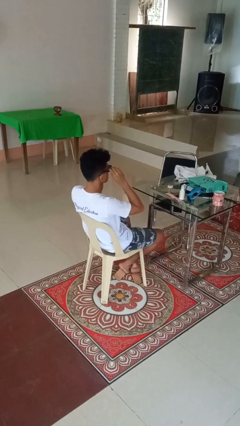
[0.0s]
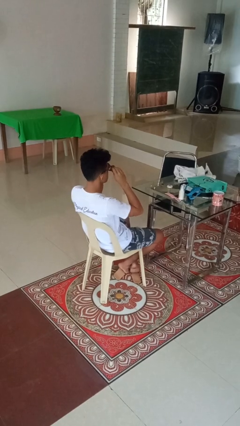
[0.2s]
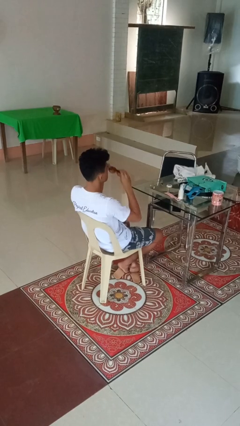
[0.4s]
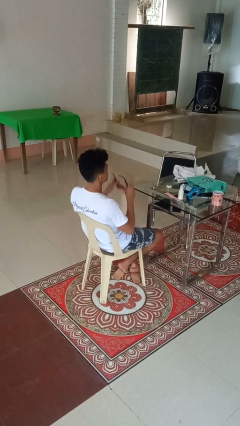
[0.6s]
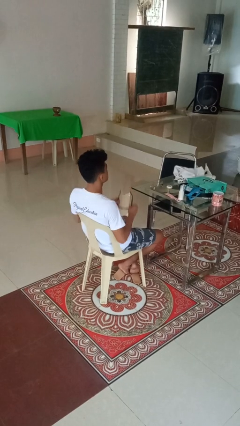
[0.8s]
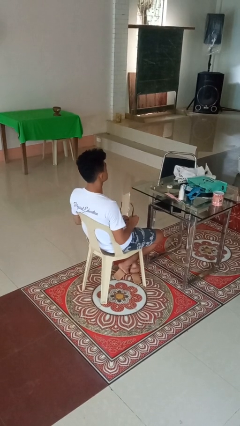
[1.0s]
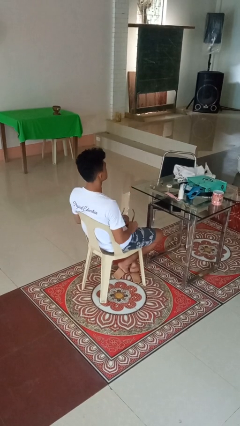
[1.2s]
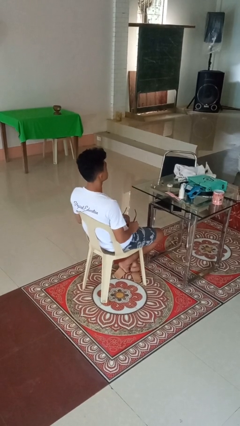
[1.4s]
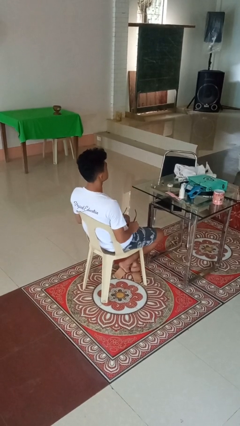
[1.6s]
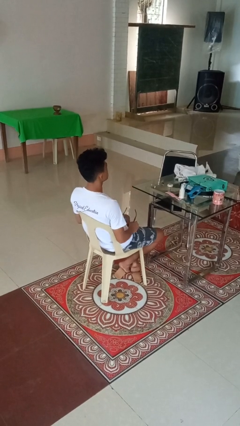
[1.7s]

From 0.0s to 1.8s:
person takes off sunglasses

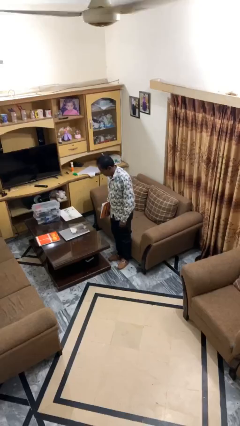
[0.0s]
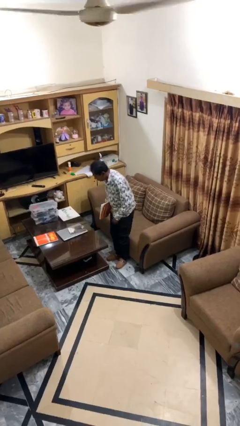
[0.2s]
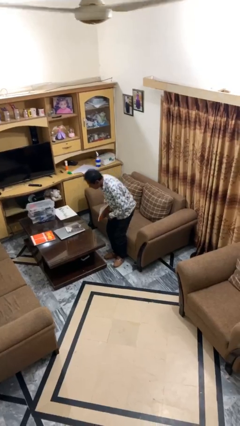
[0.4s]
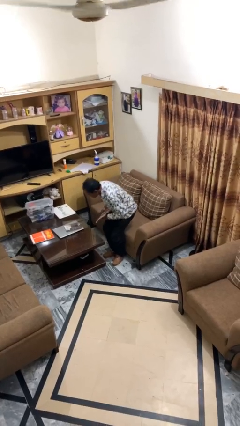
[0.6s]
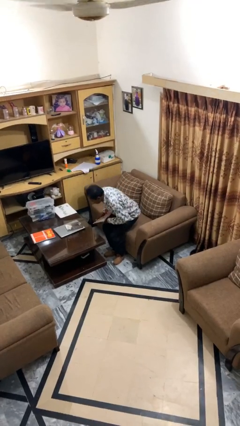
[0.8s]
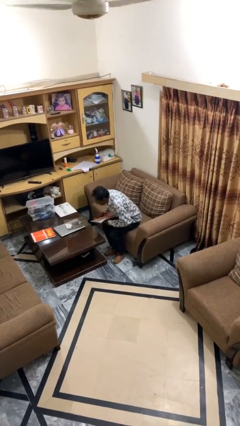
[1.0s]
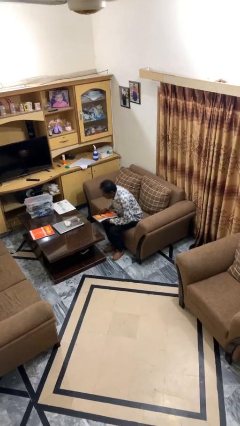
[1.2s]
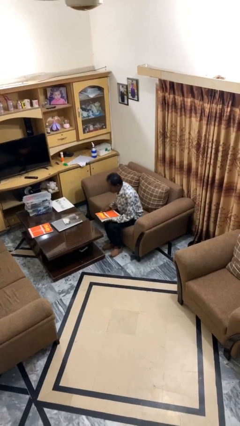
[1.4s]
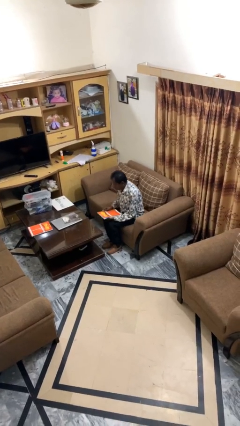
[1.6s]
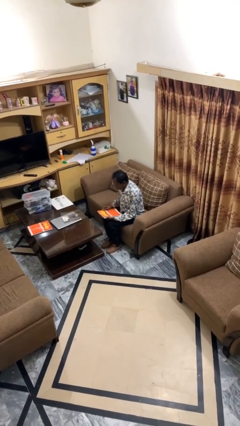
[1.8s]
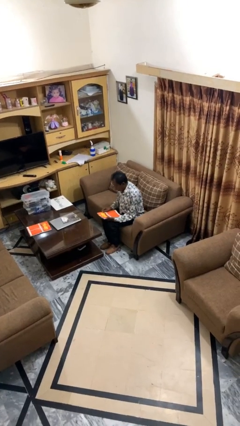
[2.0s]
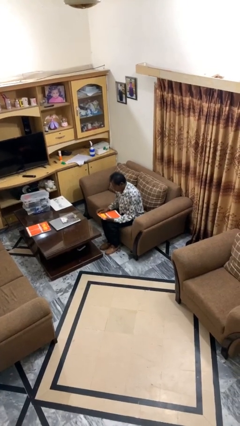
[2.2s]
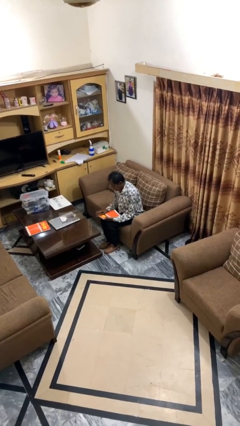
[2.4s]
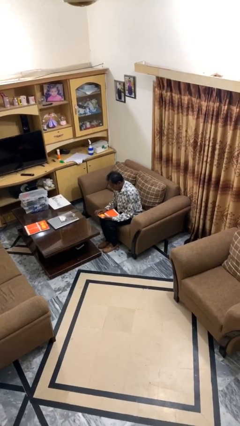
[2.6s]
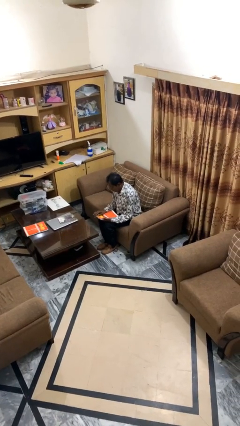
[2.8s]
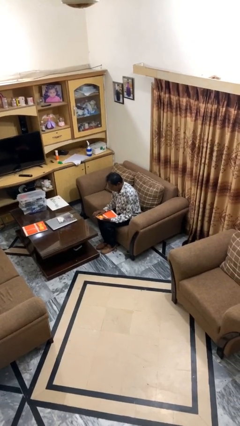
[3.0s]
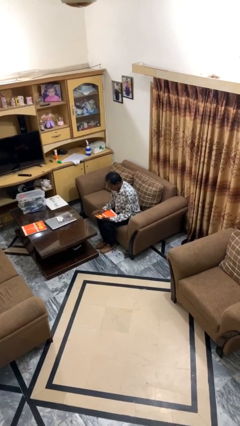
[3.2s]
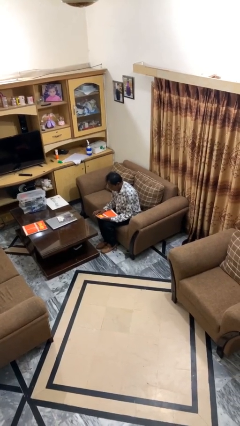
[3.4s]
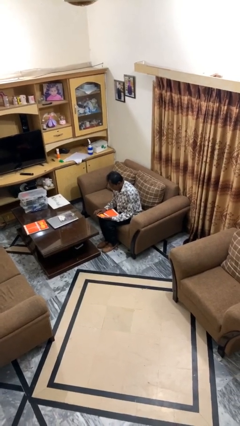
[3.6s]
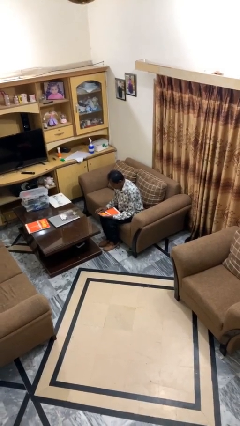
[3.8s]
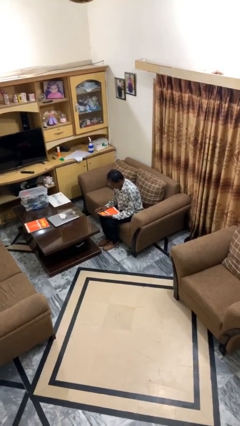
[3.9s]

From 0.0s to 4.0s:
person sits down

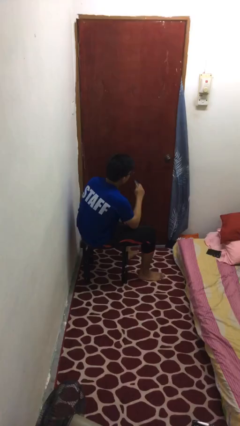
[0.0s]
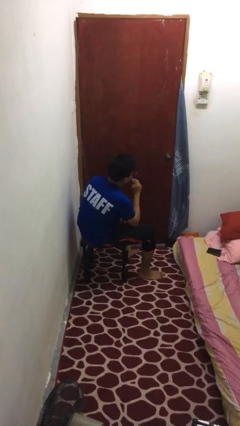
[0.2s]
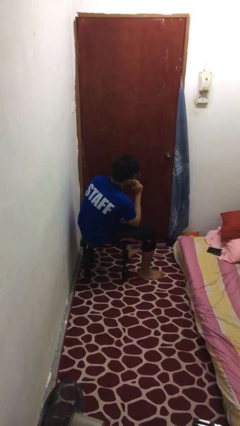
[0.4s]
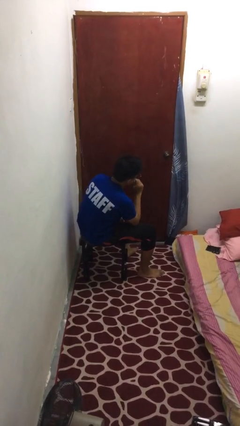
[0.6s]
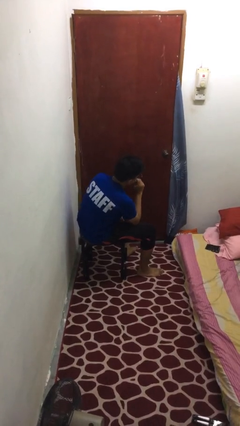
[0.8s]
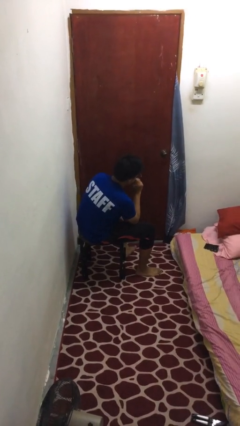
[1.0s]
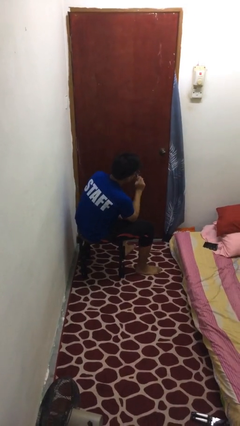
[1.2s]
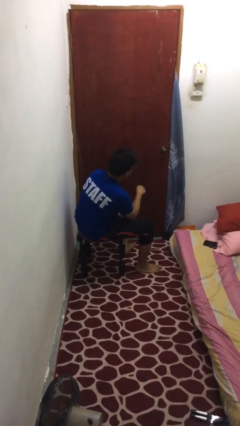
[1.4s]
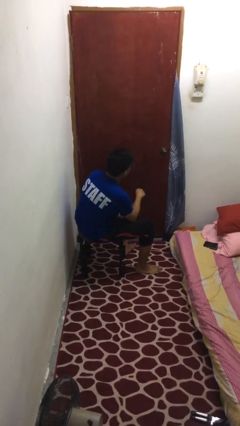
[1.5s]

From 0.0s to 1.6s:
person vapes

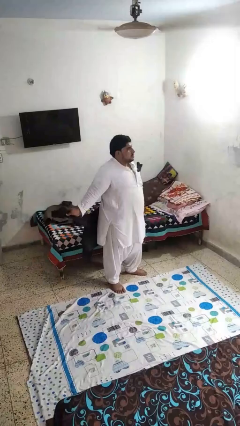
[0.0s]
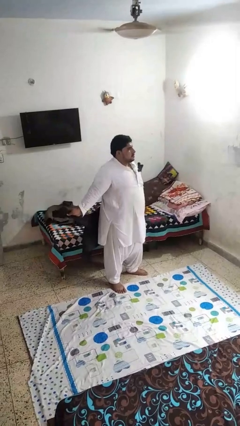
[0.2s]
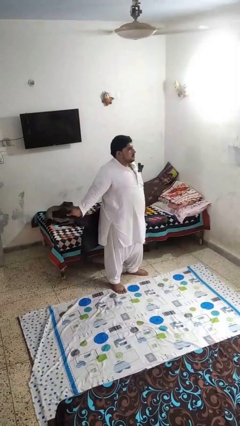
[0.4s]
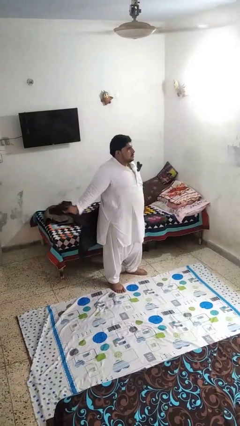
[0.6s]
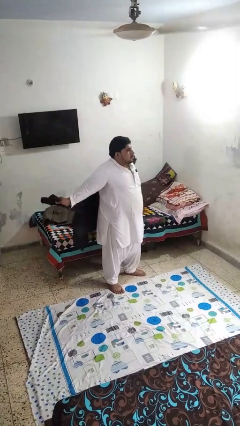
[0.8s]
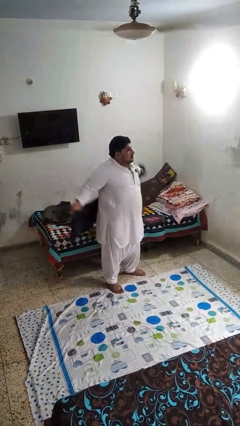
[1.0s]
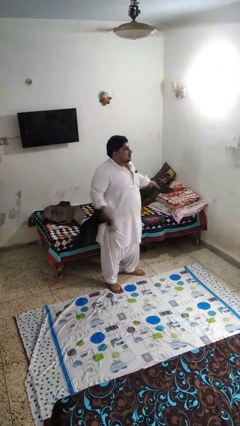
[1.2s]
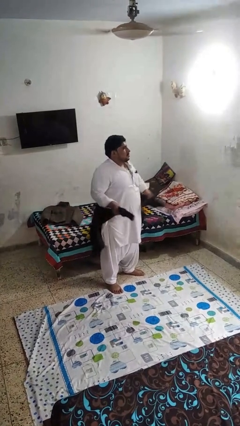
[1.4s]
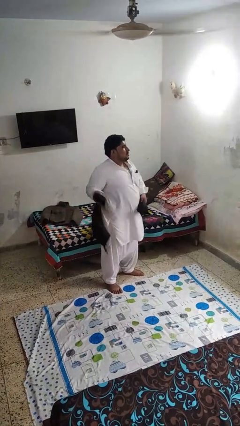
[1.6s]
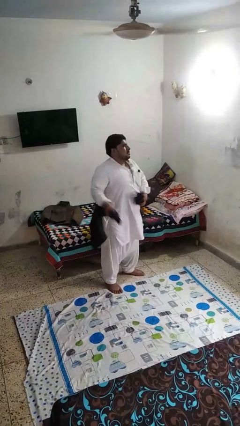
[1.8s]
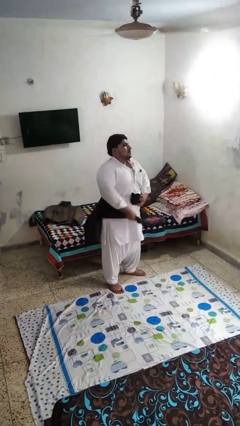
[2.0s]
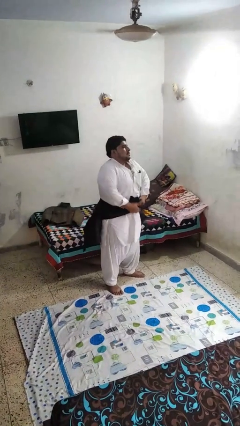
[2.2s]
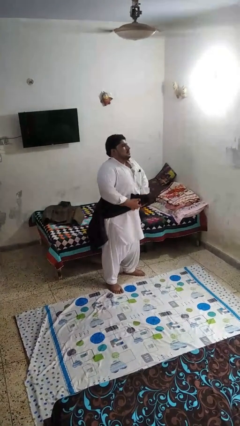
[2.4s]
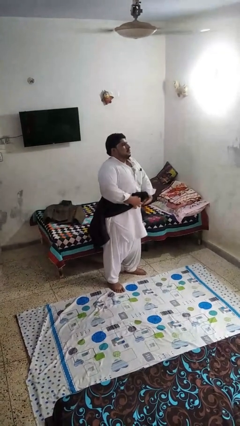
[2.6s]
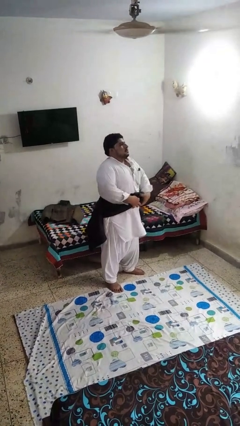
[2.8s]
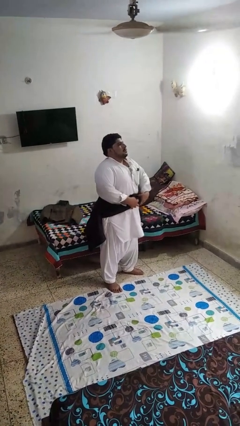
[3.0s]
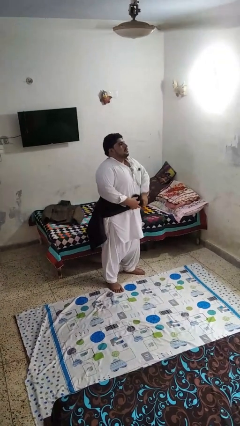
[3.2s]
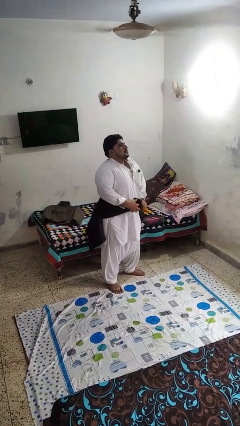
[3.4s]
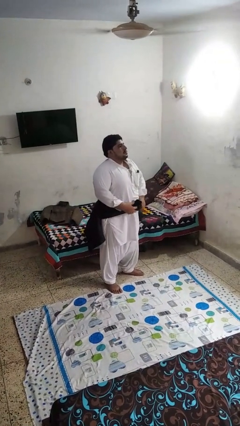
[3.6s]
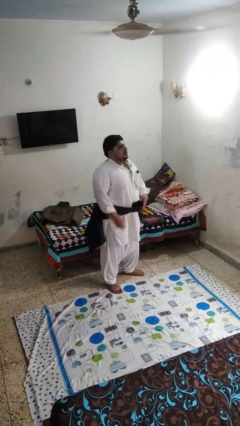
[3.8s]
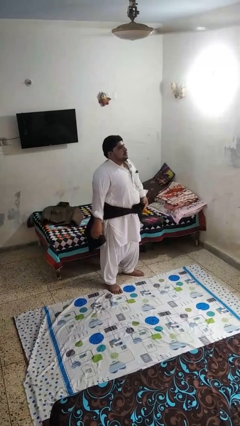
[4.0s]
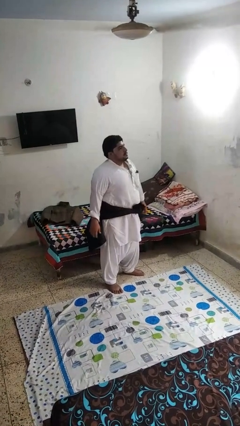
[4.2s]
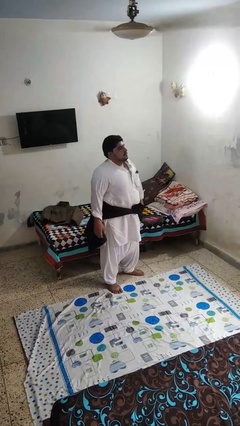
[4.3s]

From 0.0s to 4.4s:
person ties jacket around waist

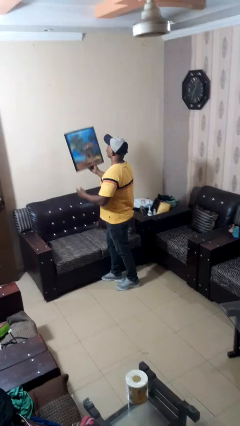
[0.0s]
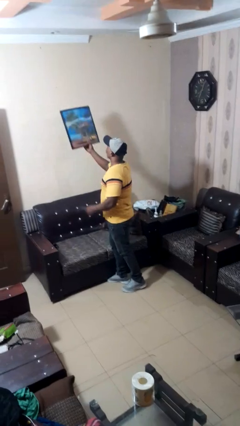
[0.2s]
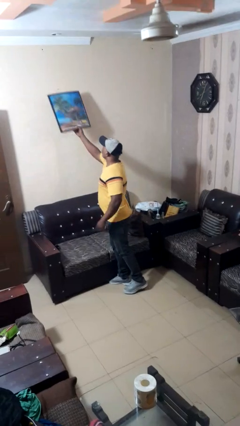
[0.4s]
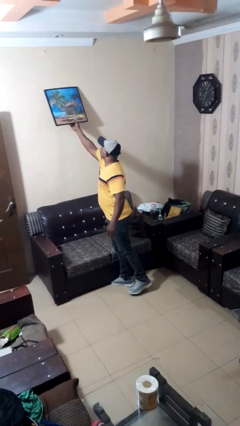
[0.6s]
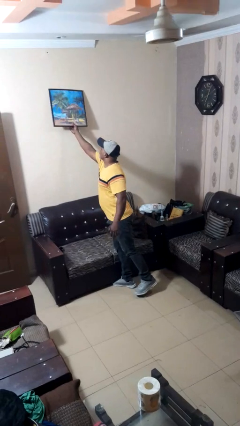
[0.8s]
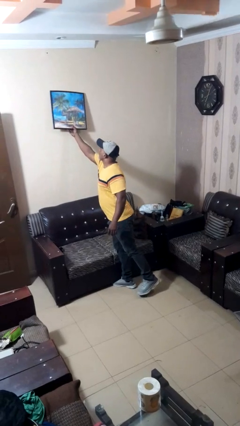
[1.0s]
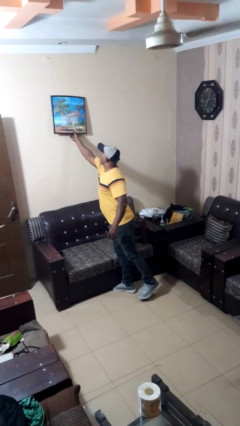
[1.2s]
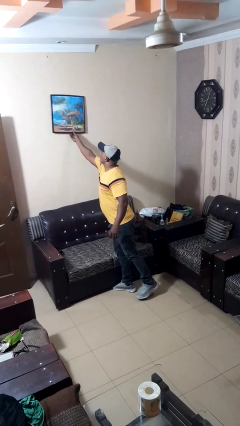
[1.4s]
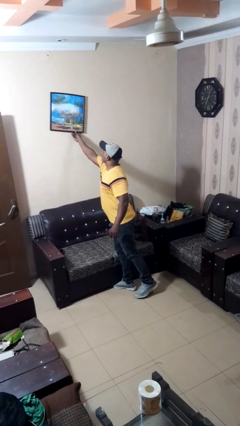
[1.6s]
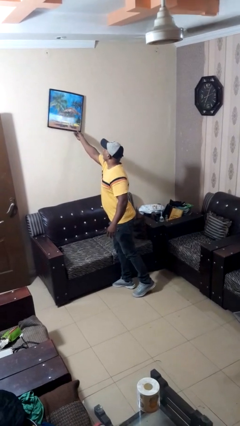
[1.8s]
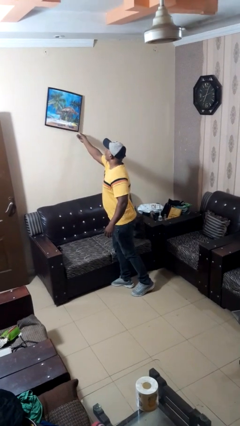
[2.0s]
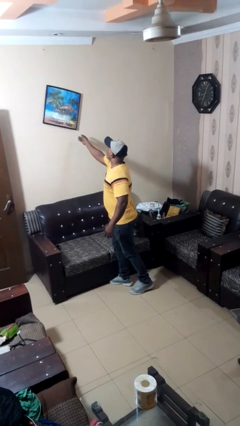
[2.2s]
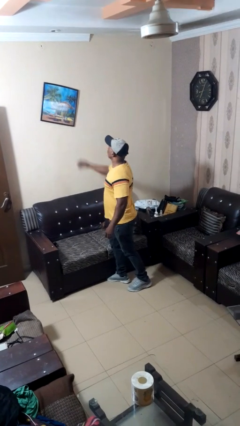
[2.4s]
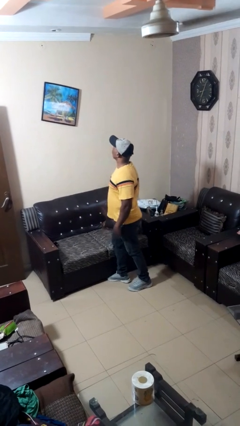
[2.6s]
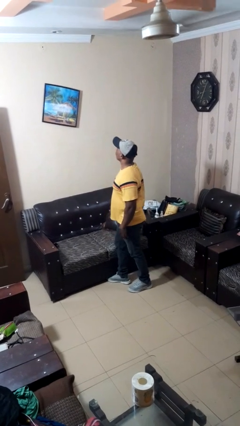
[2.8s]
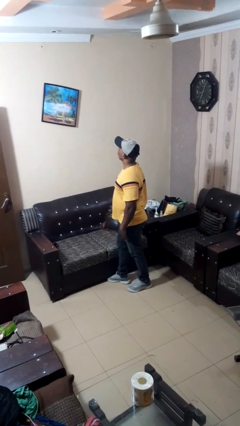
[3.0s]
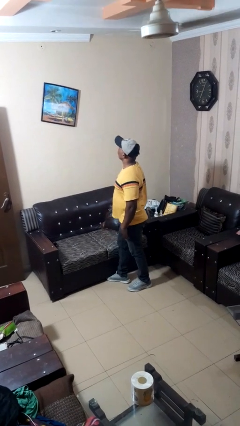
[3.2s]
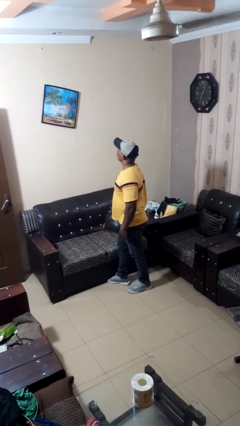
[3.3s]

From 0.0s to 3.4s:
person puts up picture frame

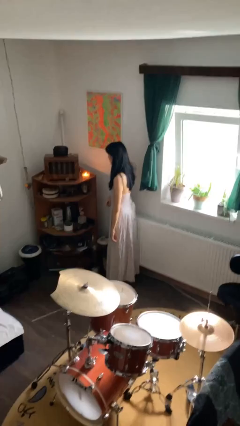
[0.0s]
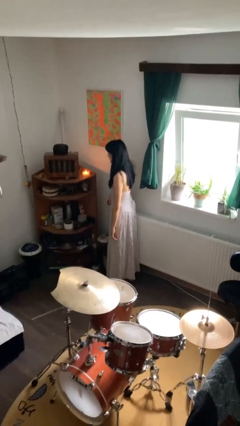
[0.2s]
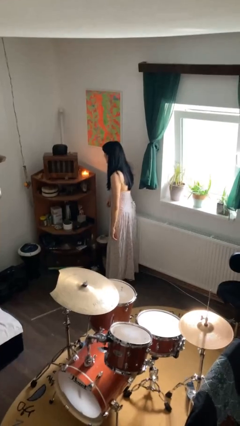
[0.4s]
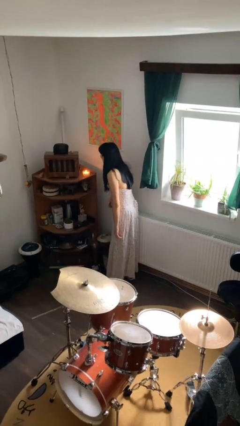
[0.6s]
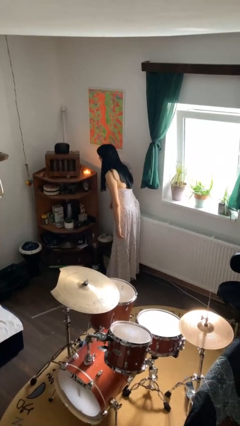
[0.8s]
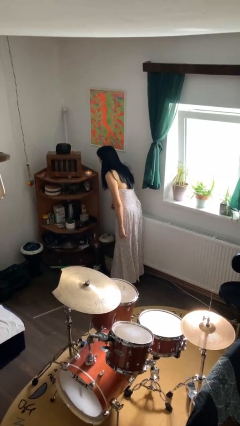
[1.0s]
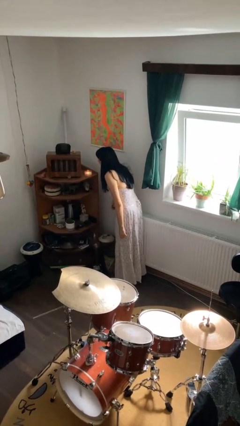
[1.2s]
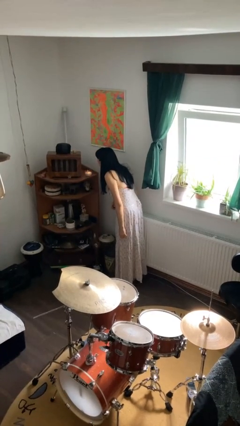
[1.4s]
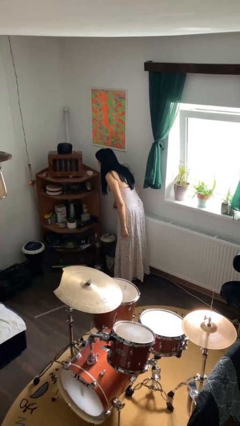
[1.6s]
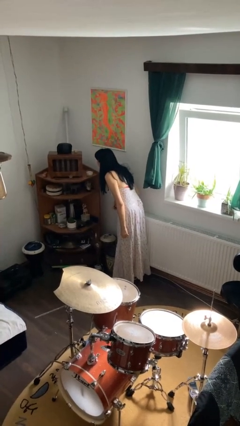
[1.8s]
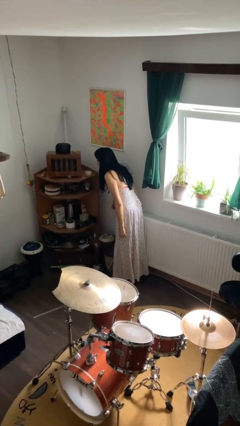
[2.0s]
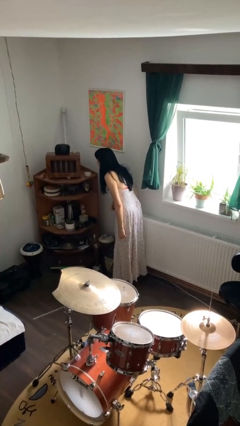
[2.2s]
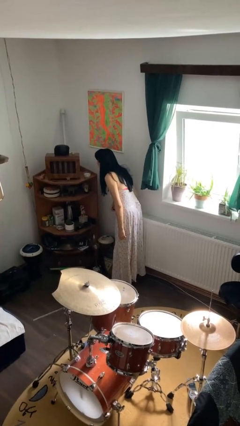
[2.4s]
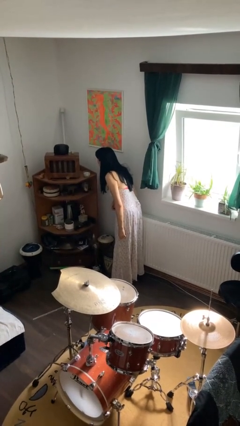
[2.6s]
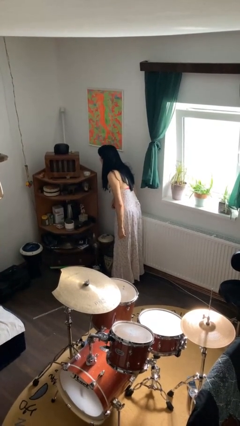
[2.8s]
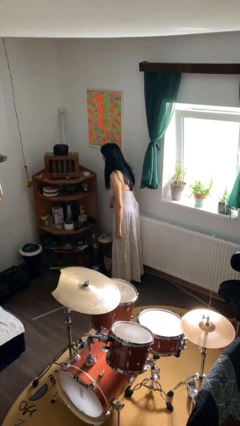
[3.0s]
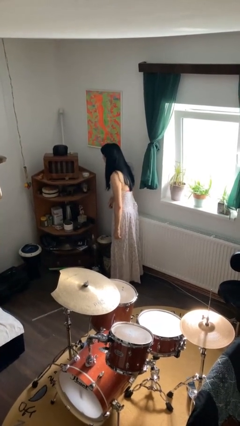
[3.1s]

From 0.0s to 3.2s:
person extinguishes candle
